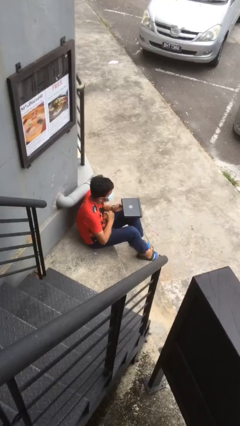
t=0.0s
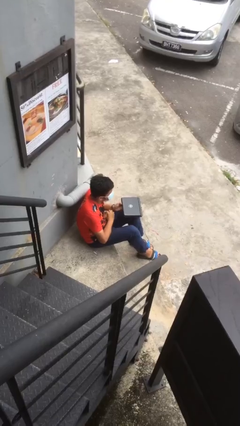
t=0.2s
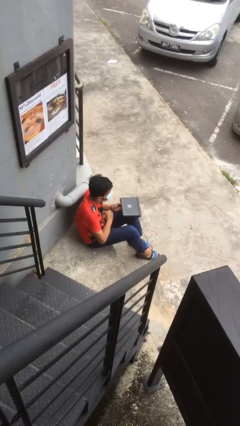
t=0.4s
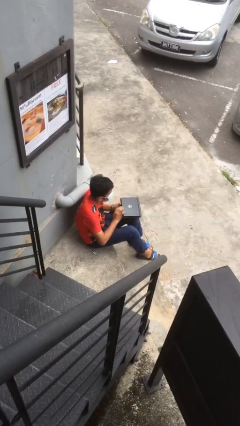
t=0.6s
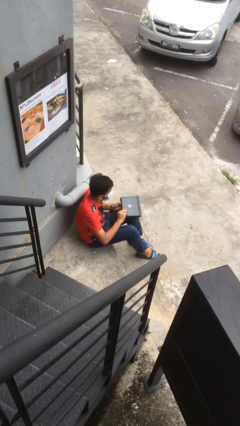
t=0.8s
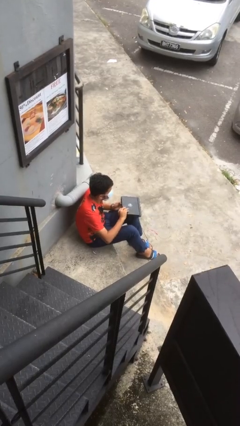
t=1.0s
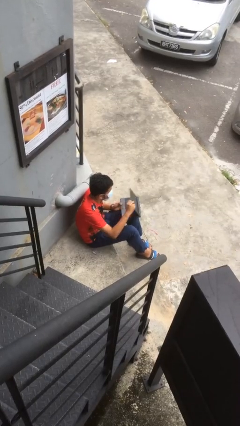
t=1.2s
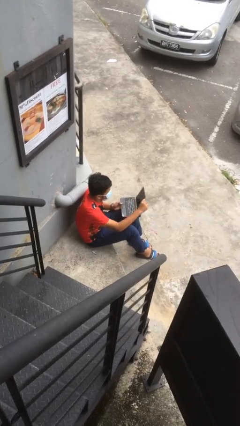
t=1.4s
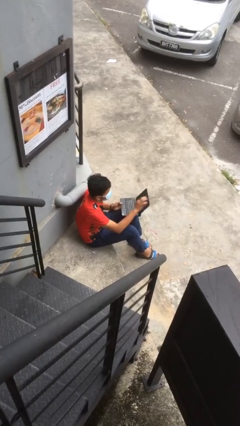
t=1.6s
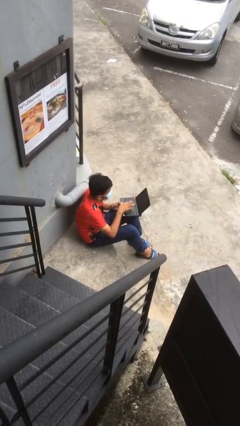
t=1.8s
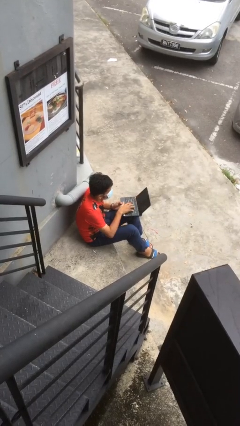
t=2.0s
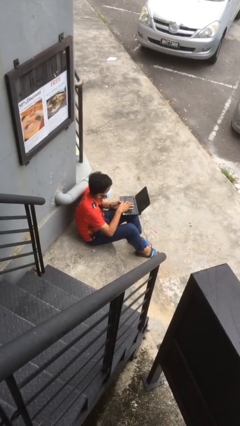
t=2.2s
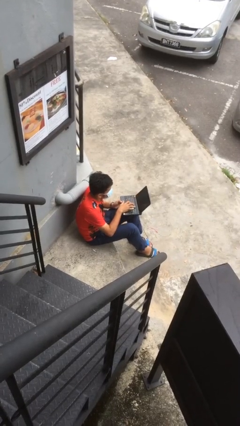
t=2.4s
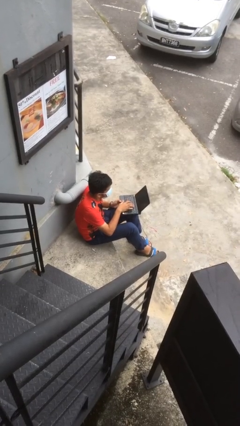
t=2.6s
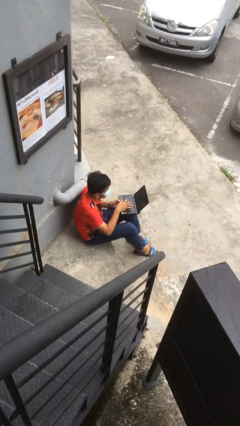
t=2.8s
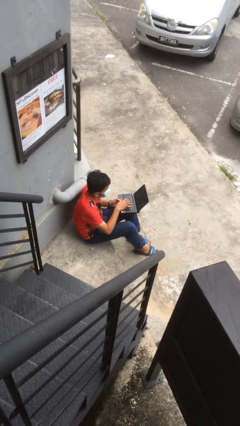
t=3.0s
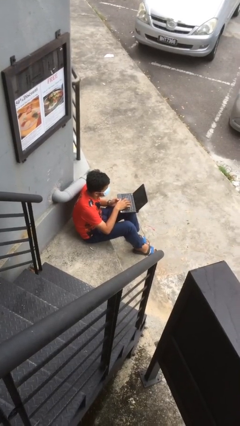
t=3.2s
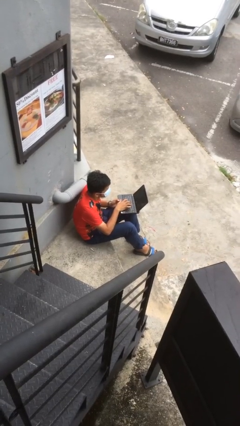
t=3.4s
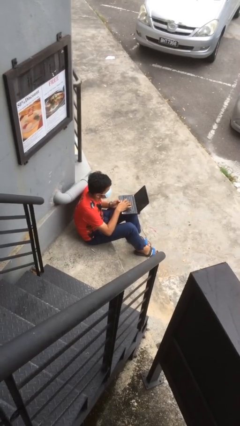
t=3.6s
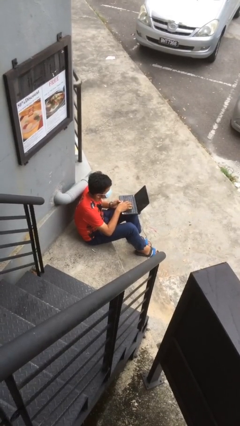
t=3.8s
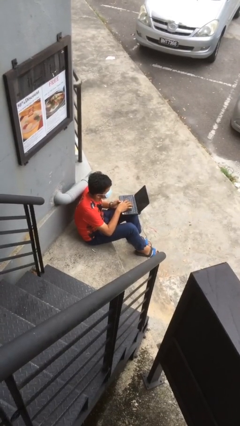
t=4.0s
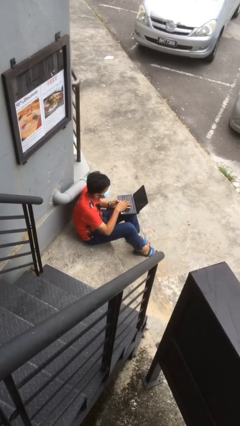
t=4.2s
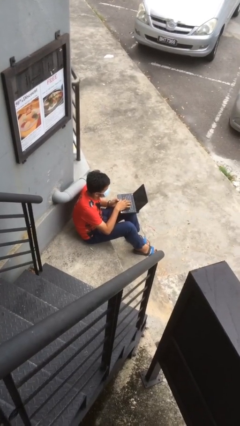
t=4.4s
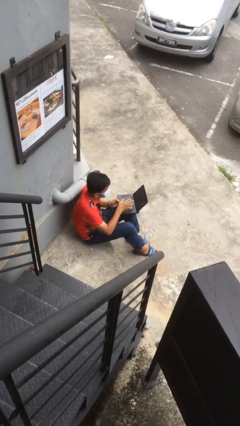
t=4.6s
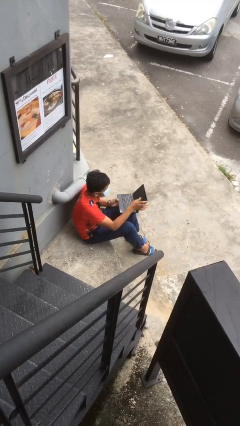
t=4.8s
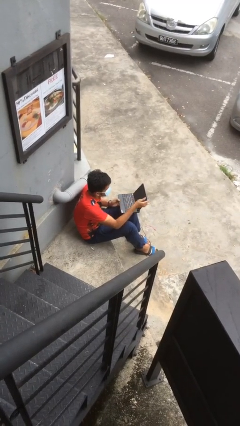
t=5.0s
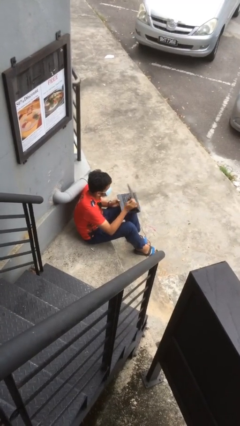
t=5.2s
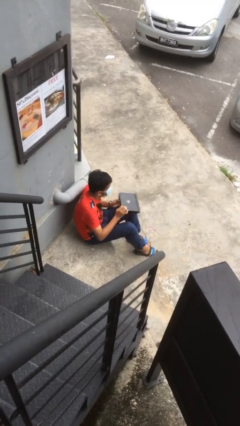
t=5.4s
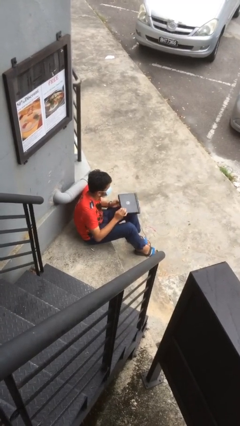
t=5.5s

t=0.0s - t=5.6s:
person interacts with laptop

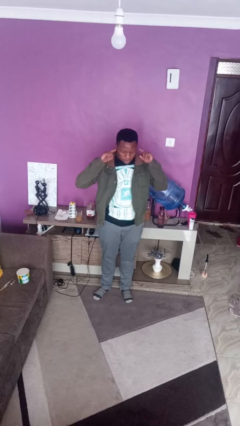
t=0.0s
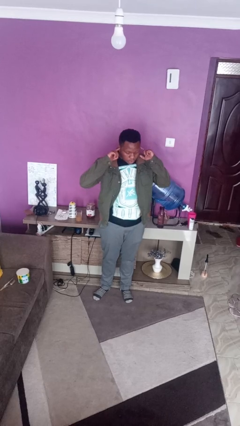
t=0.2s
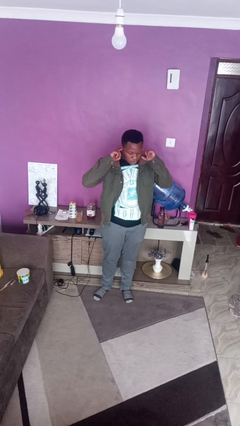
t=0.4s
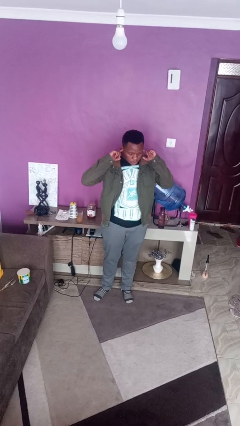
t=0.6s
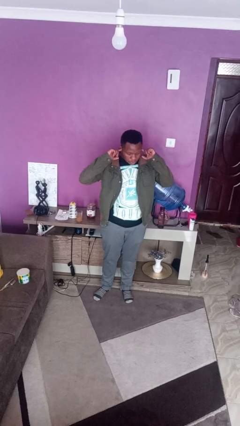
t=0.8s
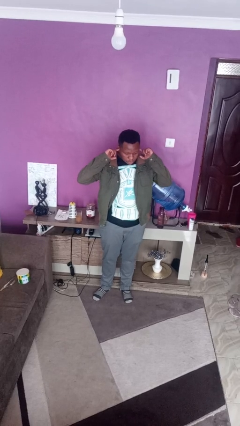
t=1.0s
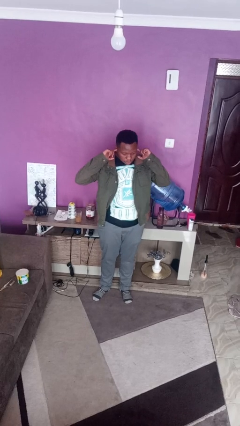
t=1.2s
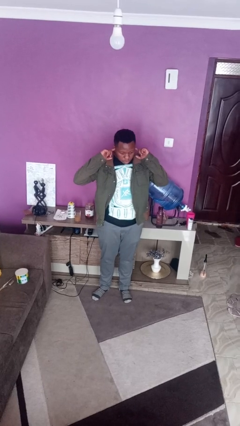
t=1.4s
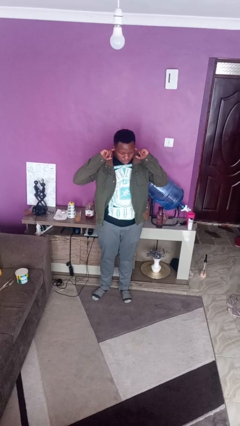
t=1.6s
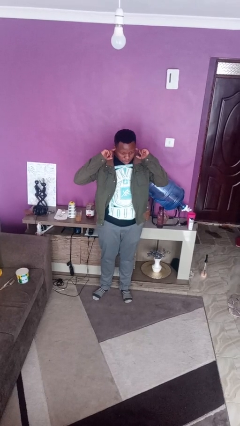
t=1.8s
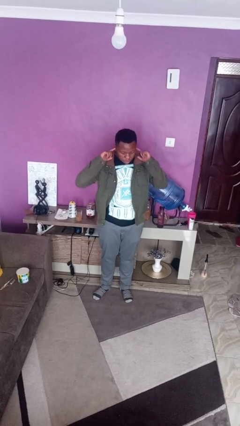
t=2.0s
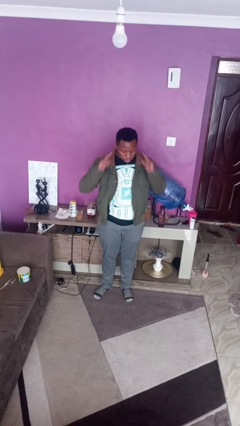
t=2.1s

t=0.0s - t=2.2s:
person puts fingers in ear

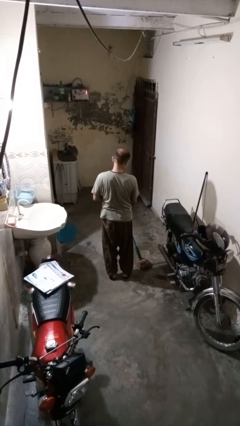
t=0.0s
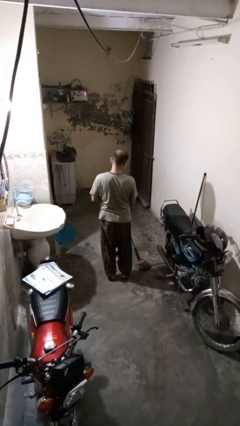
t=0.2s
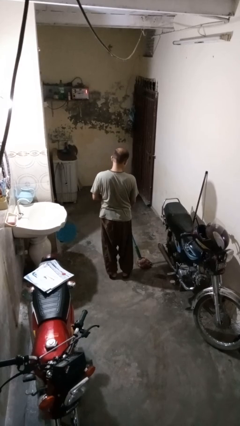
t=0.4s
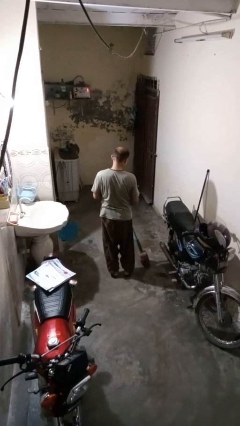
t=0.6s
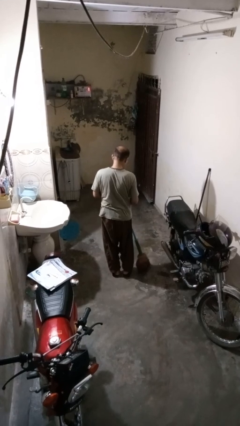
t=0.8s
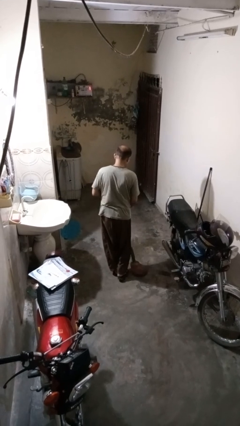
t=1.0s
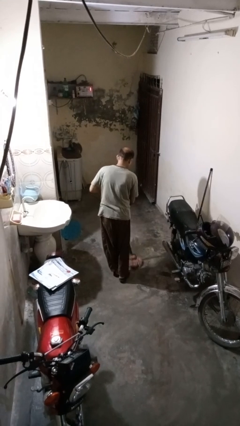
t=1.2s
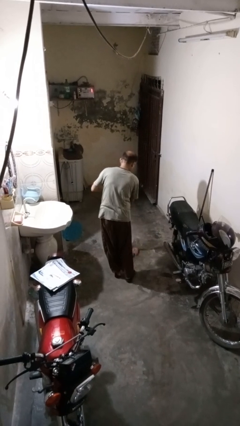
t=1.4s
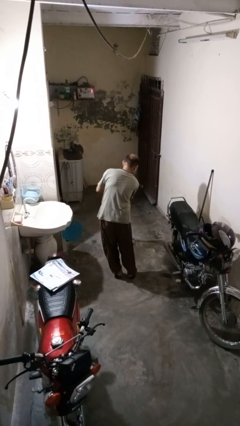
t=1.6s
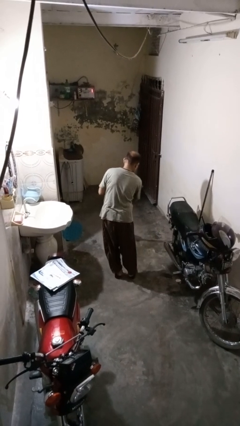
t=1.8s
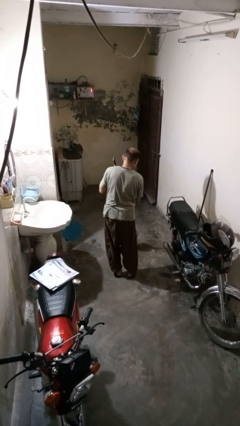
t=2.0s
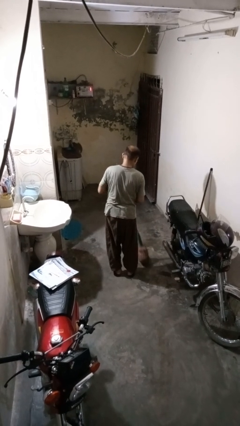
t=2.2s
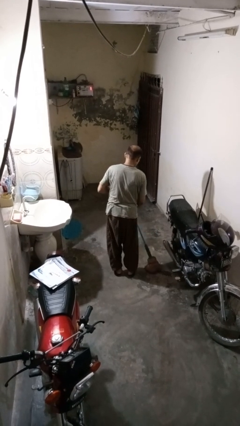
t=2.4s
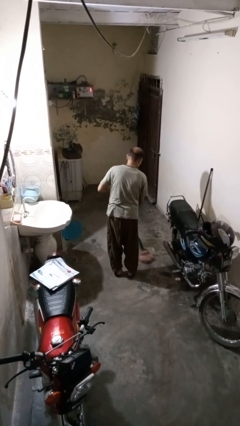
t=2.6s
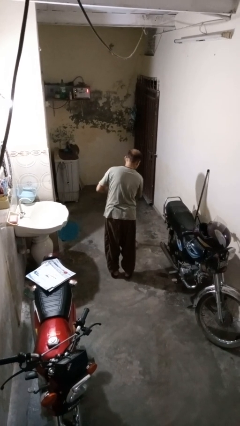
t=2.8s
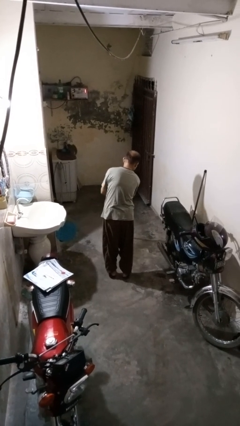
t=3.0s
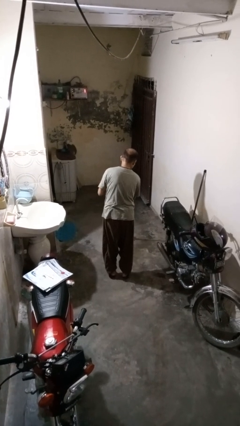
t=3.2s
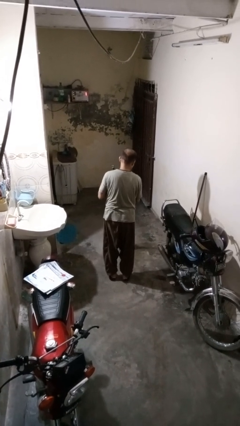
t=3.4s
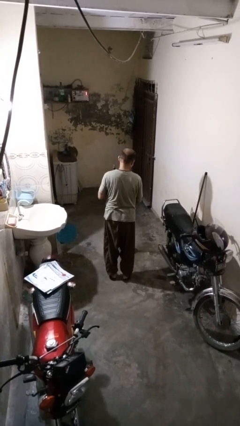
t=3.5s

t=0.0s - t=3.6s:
person mops

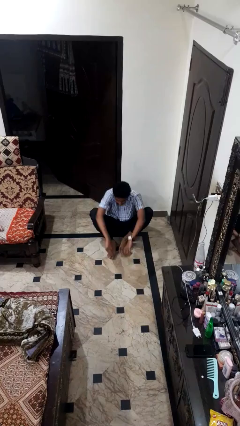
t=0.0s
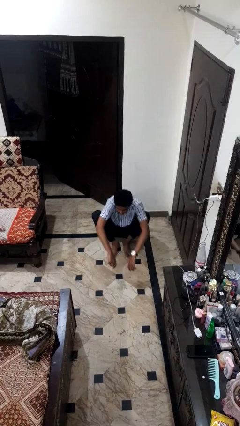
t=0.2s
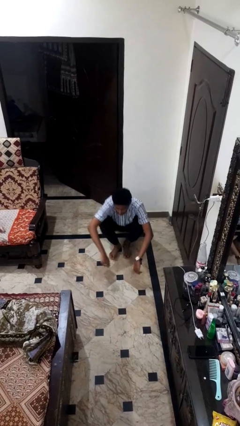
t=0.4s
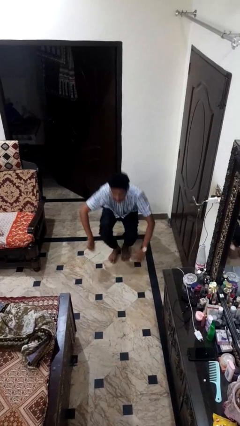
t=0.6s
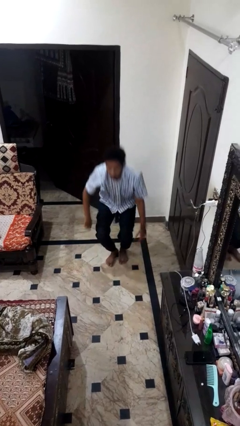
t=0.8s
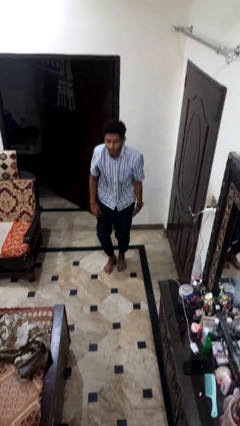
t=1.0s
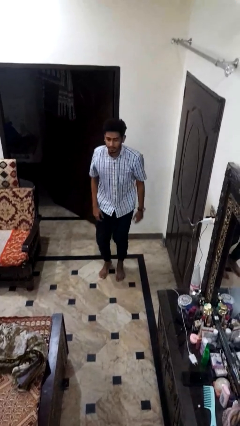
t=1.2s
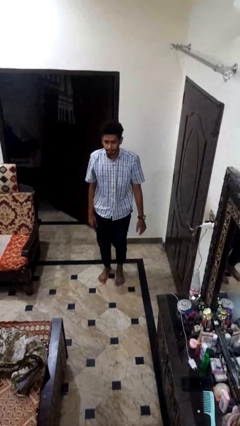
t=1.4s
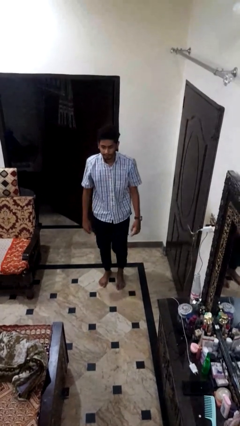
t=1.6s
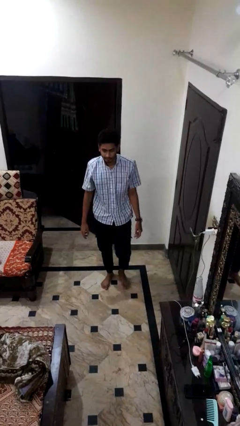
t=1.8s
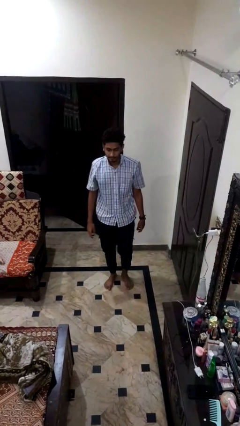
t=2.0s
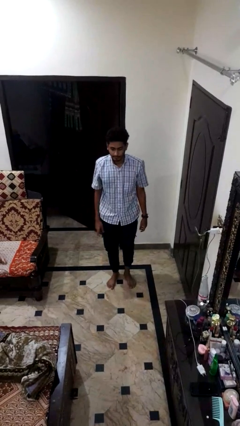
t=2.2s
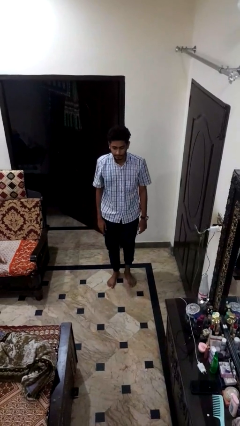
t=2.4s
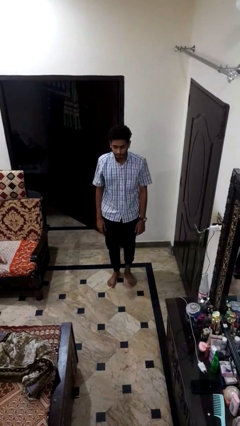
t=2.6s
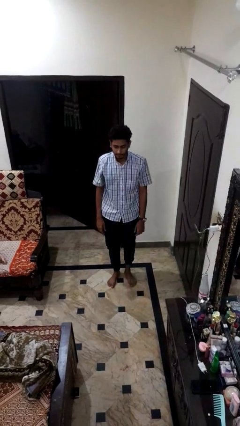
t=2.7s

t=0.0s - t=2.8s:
person stands up from floor

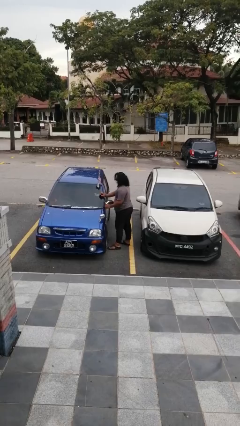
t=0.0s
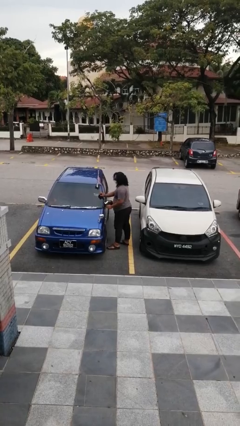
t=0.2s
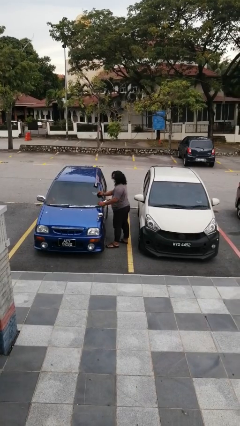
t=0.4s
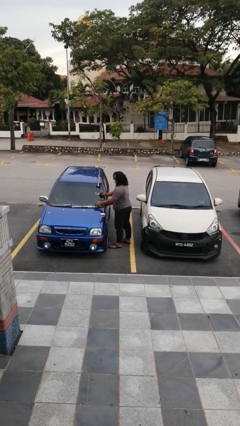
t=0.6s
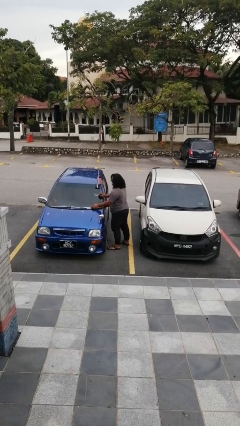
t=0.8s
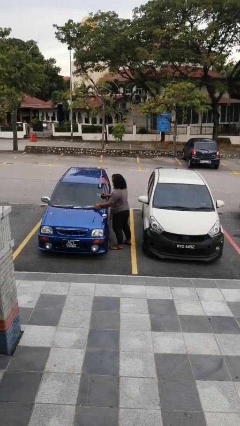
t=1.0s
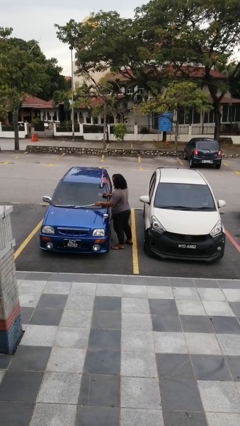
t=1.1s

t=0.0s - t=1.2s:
person flips down car wipers

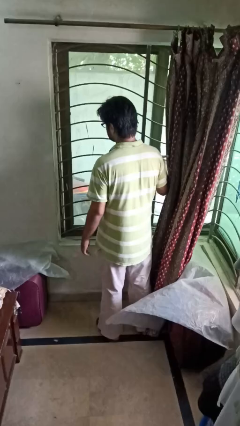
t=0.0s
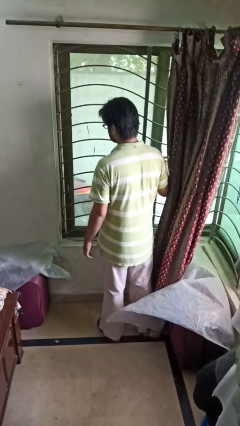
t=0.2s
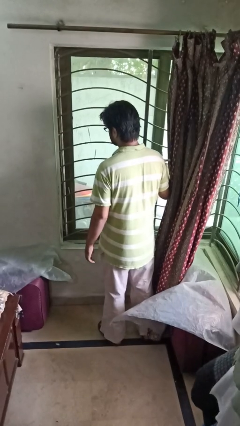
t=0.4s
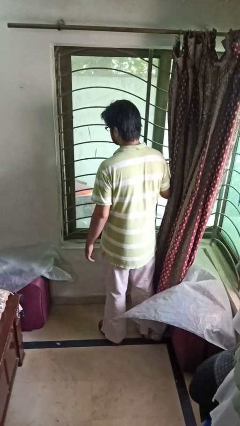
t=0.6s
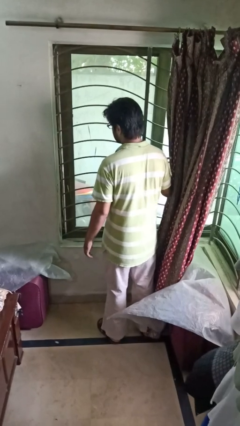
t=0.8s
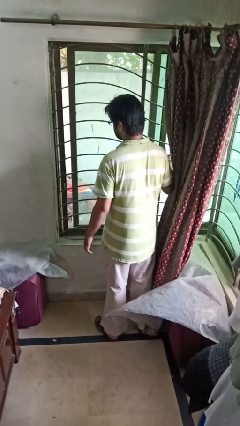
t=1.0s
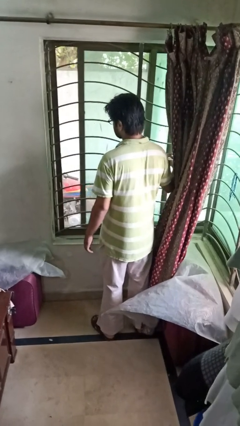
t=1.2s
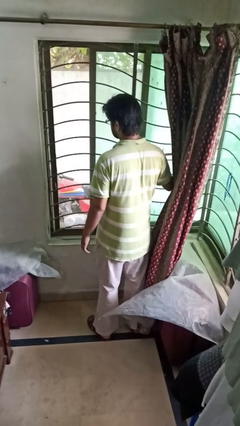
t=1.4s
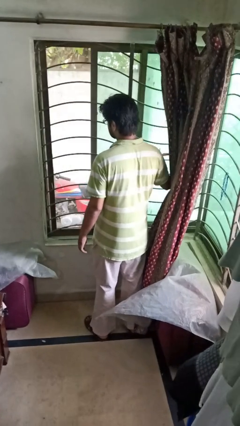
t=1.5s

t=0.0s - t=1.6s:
person opens home window

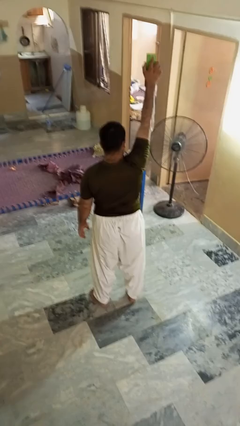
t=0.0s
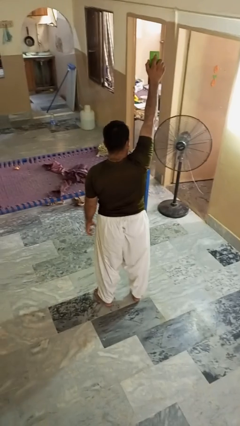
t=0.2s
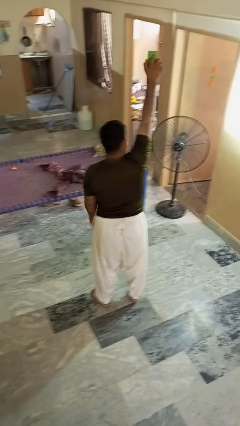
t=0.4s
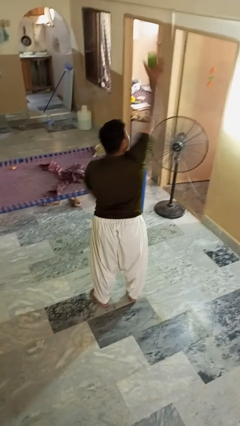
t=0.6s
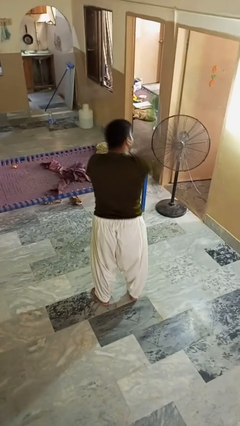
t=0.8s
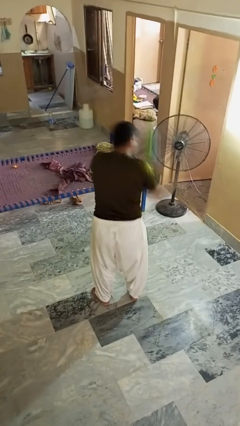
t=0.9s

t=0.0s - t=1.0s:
person drops object
